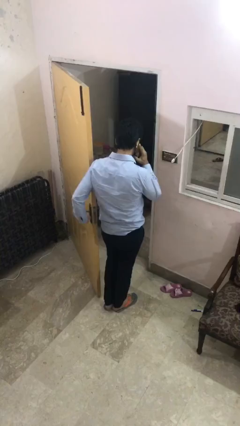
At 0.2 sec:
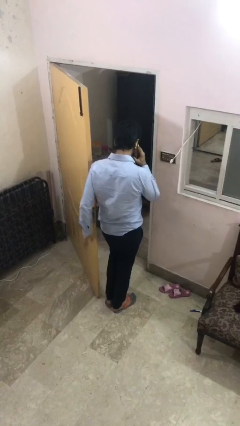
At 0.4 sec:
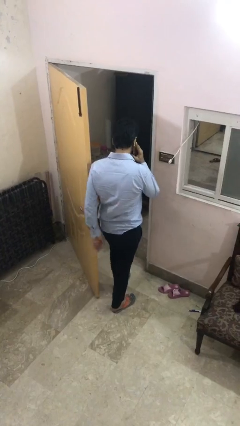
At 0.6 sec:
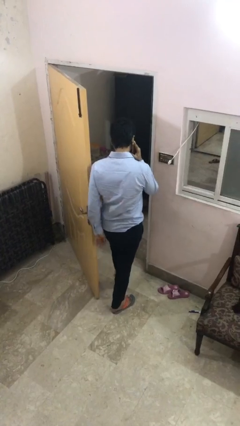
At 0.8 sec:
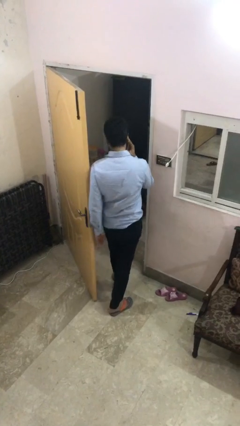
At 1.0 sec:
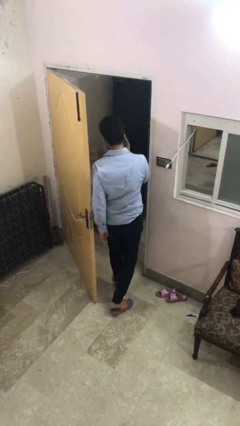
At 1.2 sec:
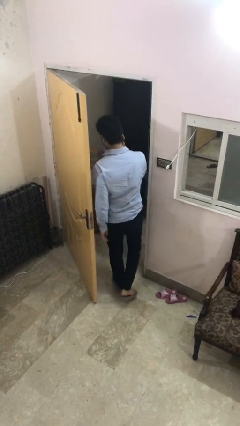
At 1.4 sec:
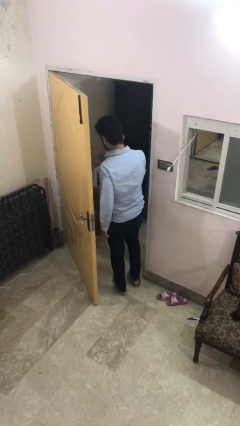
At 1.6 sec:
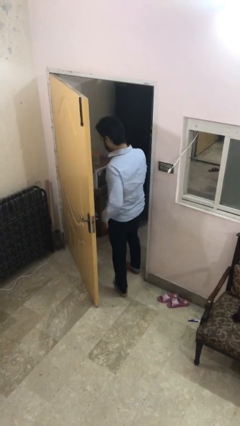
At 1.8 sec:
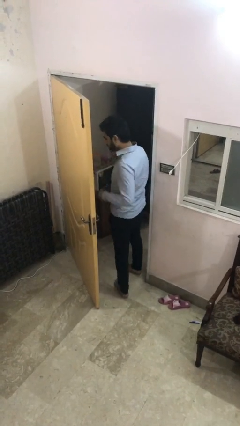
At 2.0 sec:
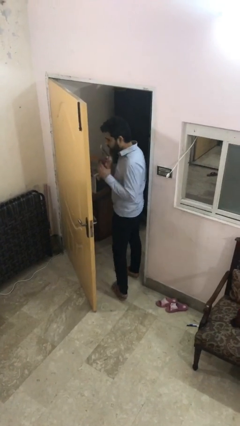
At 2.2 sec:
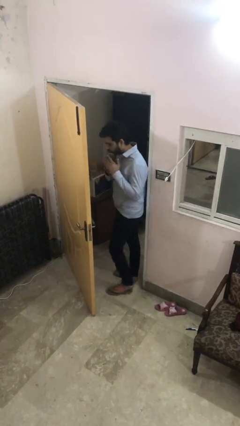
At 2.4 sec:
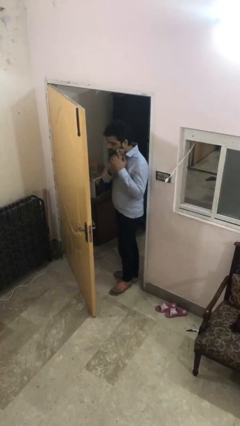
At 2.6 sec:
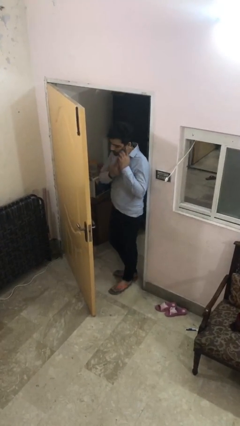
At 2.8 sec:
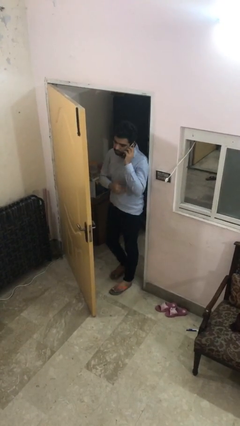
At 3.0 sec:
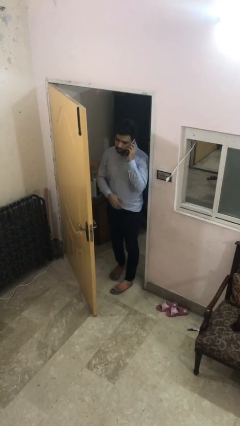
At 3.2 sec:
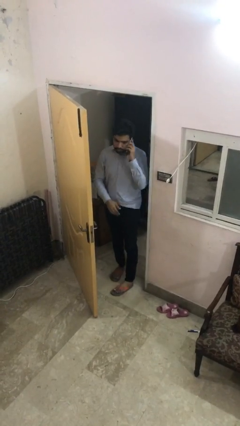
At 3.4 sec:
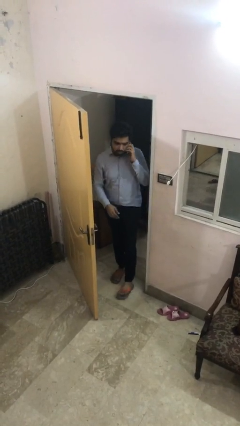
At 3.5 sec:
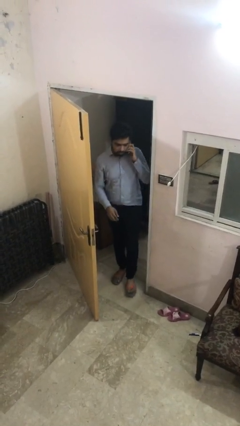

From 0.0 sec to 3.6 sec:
person exits scene through structure

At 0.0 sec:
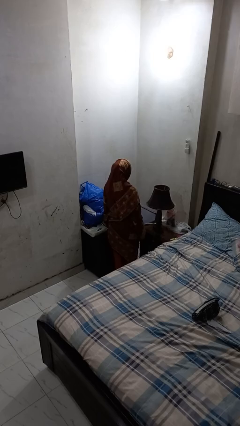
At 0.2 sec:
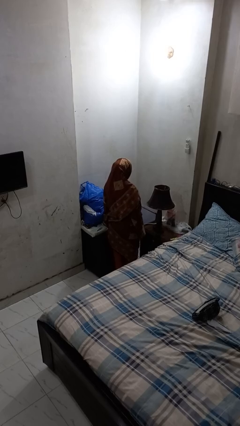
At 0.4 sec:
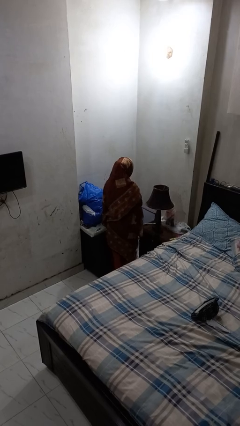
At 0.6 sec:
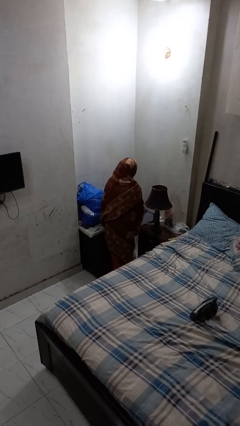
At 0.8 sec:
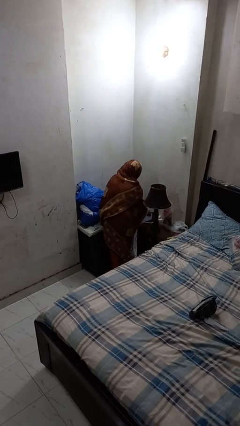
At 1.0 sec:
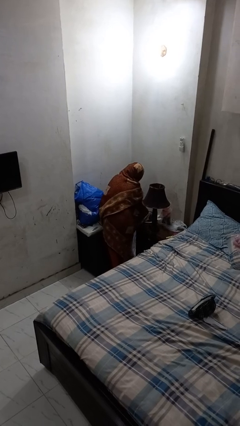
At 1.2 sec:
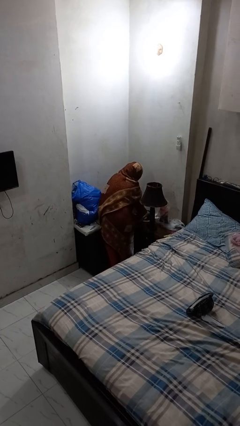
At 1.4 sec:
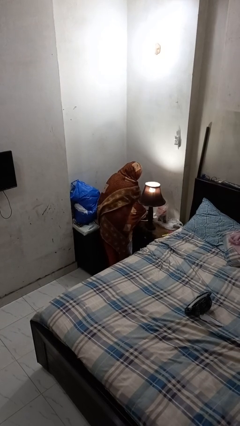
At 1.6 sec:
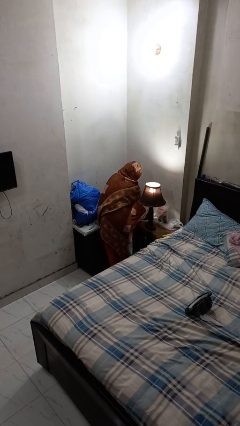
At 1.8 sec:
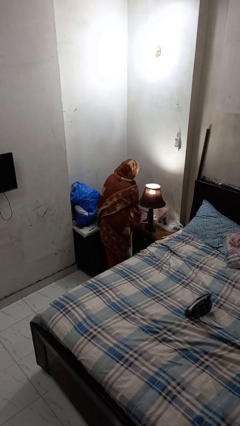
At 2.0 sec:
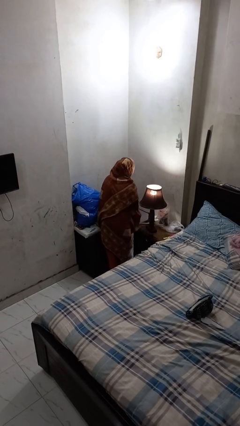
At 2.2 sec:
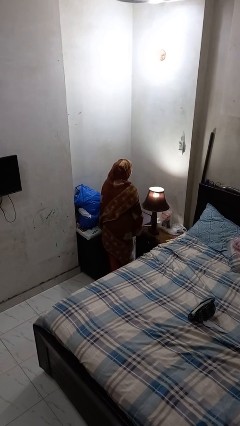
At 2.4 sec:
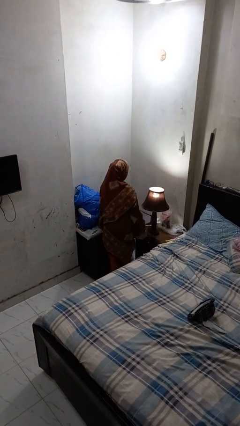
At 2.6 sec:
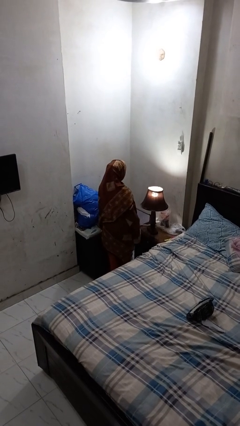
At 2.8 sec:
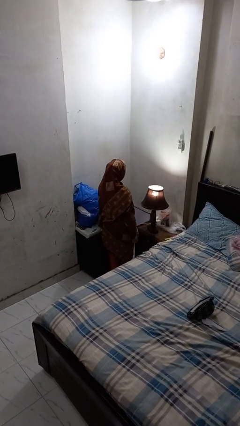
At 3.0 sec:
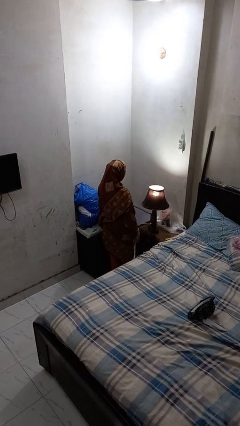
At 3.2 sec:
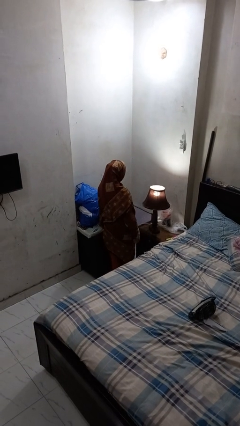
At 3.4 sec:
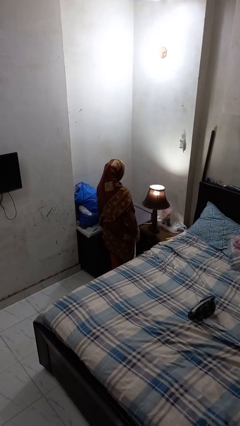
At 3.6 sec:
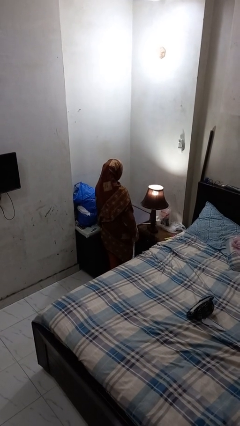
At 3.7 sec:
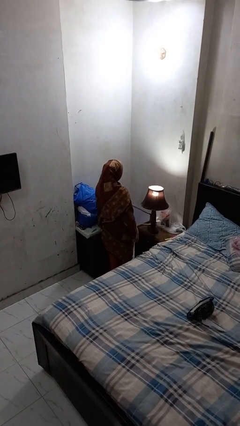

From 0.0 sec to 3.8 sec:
person turns on lamp

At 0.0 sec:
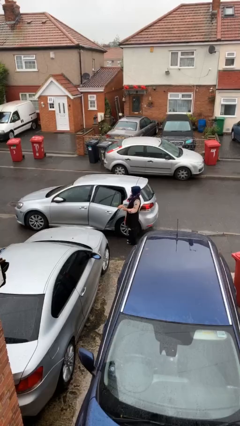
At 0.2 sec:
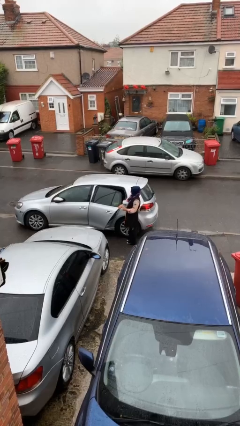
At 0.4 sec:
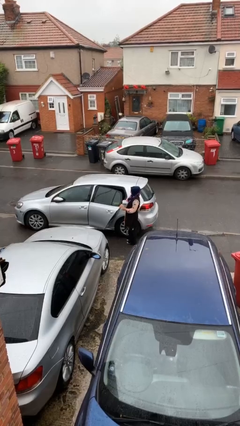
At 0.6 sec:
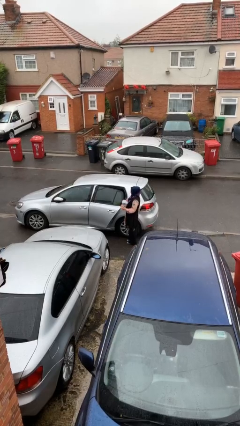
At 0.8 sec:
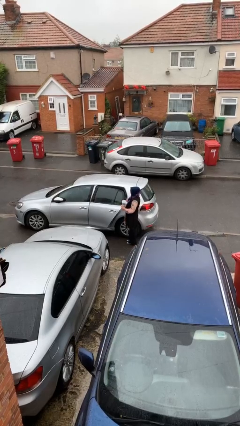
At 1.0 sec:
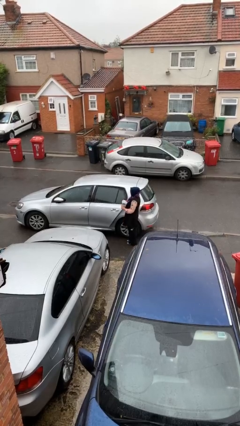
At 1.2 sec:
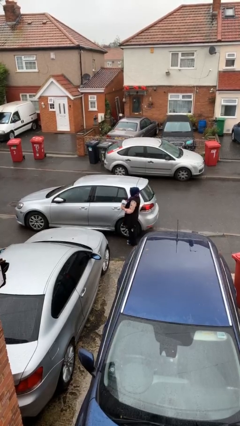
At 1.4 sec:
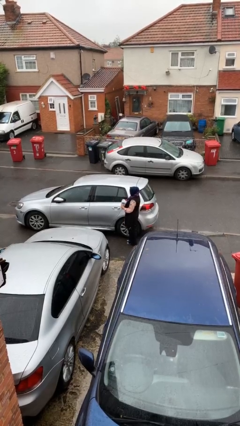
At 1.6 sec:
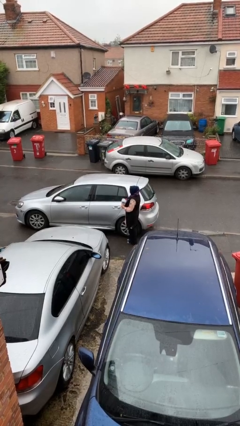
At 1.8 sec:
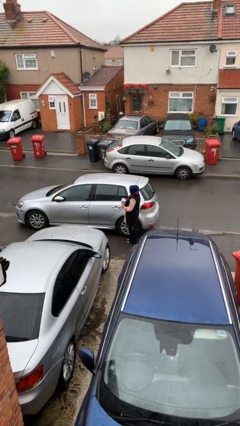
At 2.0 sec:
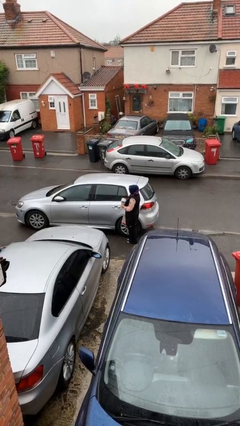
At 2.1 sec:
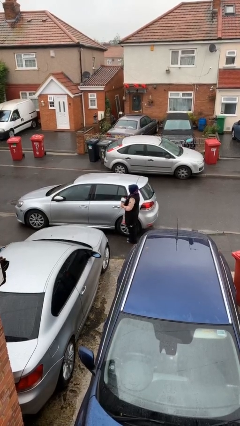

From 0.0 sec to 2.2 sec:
person closes car door

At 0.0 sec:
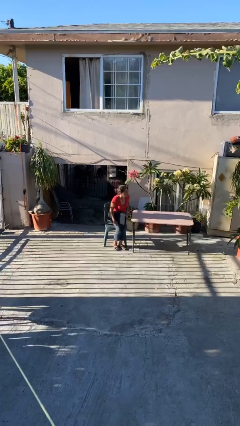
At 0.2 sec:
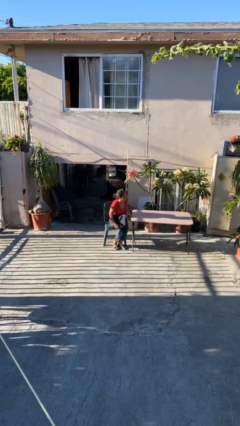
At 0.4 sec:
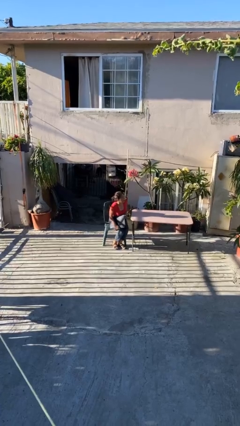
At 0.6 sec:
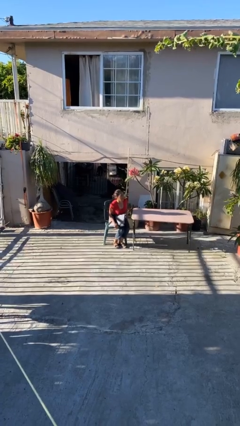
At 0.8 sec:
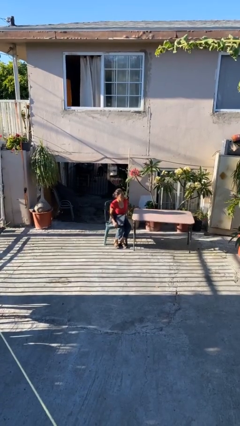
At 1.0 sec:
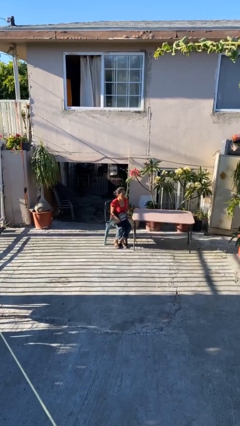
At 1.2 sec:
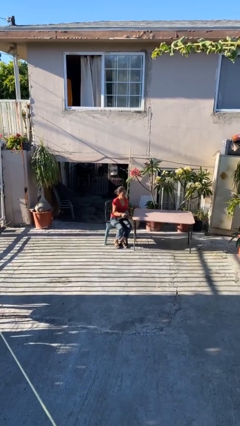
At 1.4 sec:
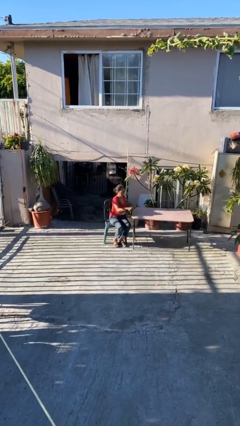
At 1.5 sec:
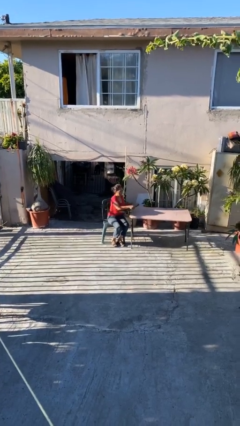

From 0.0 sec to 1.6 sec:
person sits down

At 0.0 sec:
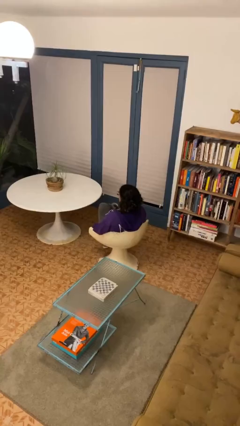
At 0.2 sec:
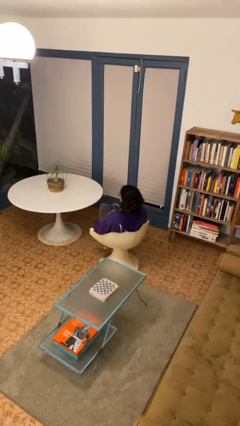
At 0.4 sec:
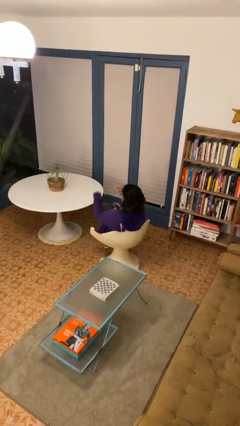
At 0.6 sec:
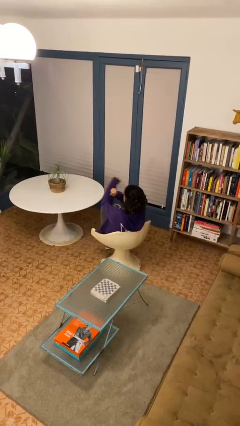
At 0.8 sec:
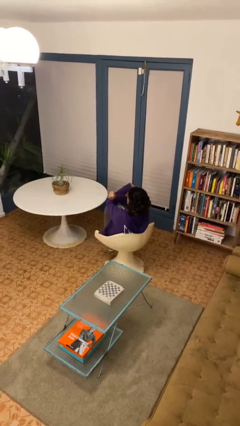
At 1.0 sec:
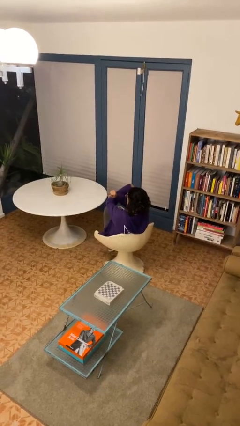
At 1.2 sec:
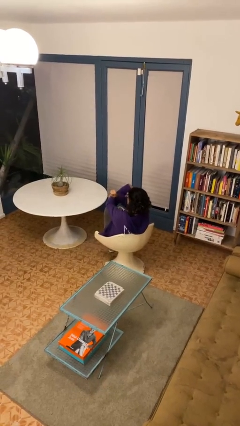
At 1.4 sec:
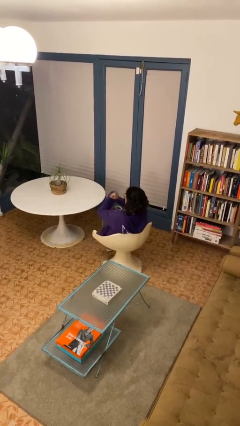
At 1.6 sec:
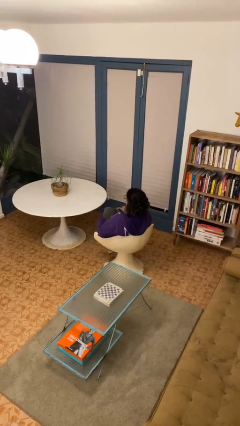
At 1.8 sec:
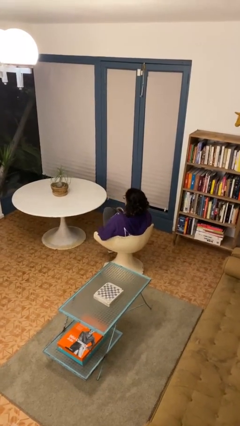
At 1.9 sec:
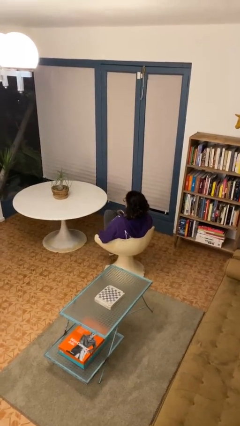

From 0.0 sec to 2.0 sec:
person gestures arms x

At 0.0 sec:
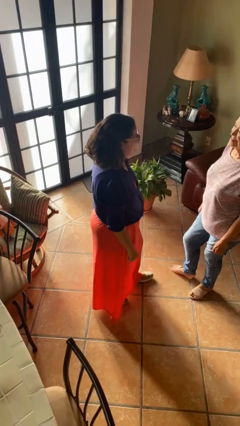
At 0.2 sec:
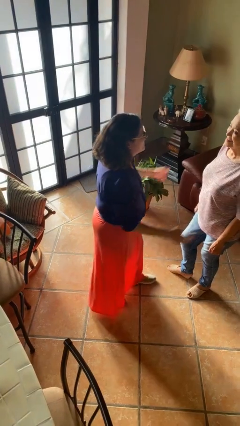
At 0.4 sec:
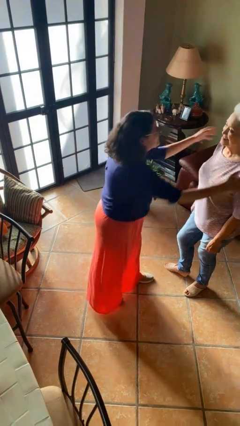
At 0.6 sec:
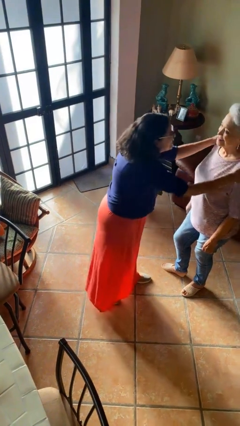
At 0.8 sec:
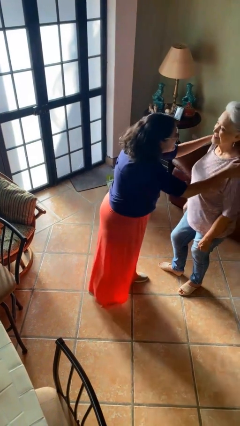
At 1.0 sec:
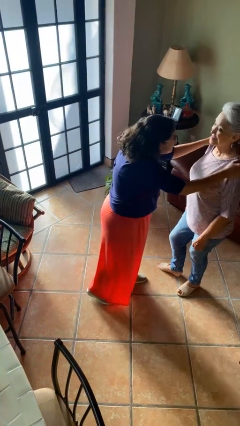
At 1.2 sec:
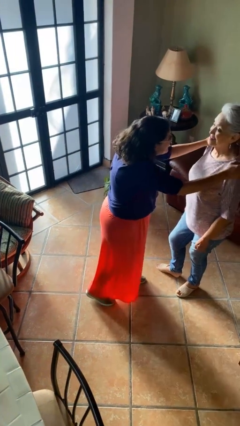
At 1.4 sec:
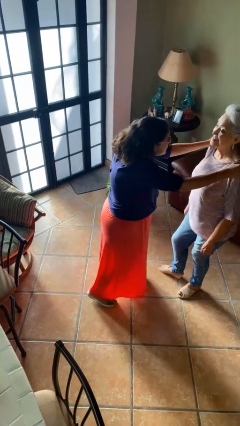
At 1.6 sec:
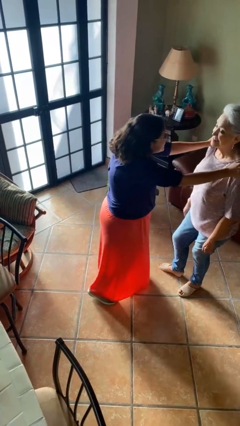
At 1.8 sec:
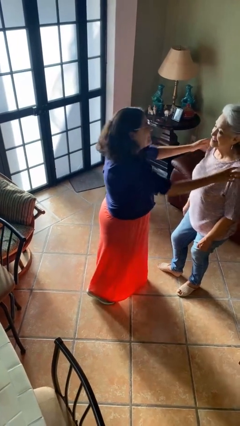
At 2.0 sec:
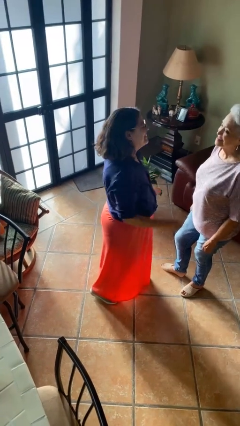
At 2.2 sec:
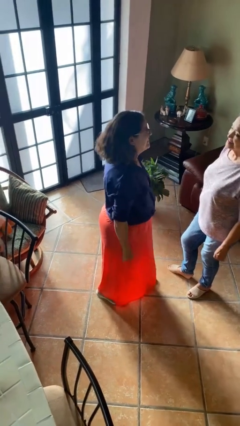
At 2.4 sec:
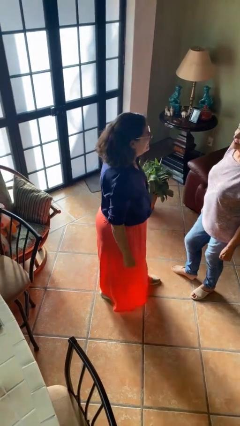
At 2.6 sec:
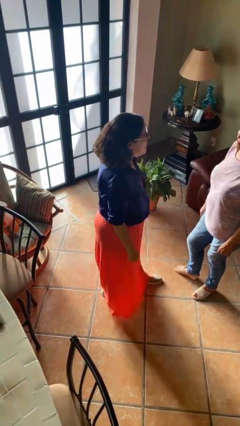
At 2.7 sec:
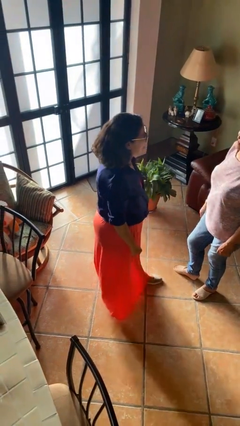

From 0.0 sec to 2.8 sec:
person pounds shoulders of person

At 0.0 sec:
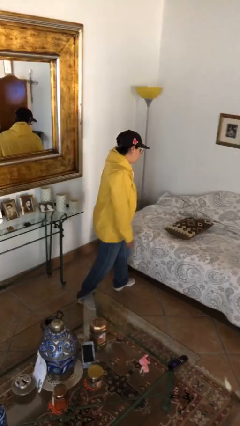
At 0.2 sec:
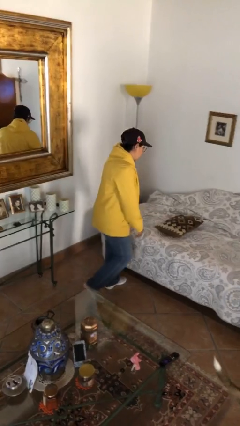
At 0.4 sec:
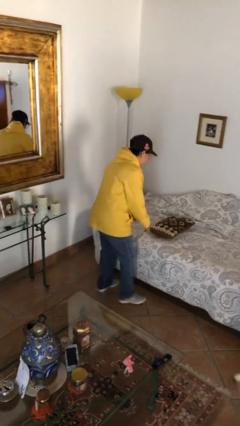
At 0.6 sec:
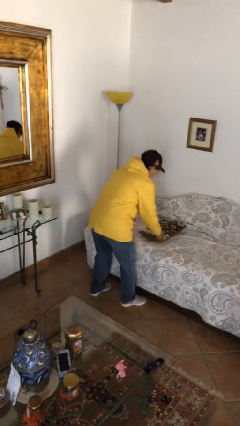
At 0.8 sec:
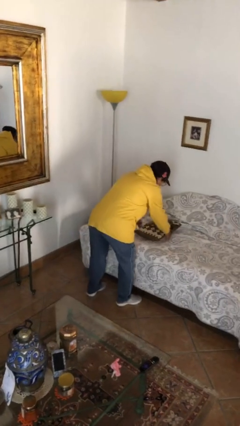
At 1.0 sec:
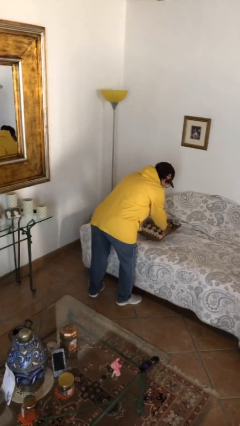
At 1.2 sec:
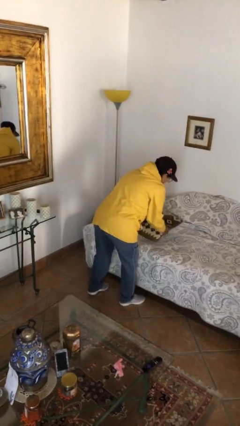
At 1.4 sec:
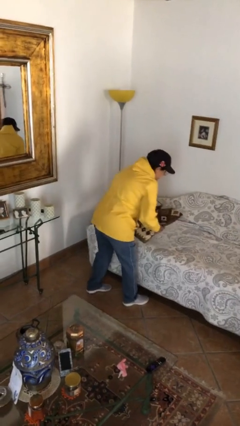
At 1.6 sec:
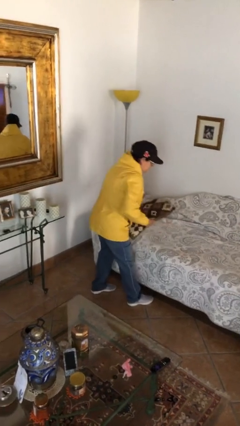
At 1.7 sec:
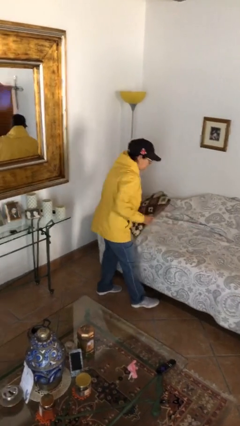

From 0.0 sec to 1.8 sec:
person picks up object from bed
